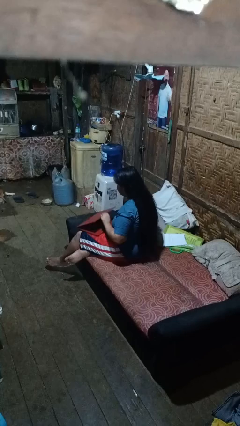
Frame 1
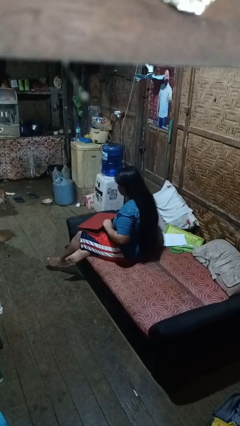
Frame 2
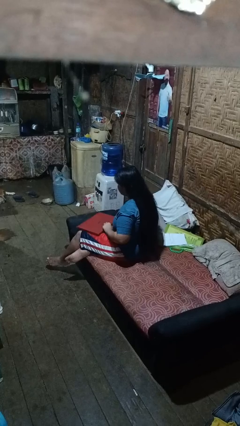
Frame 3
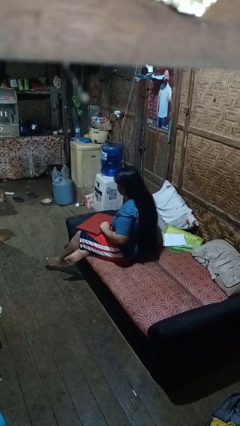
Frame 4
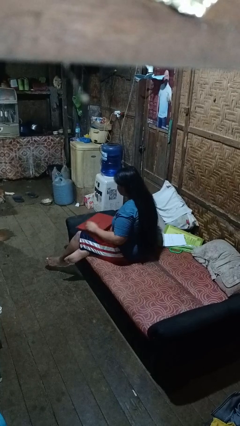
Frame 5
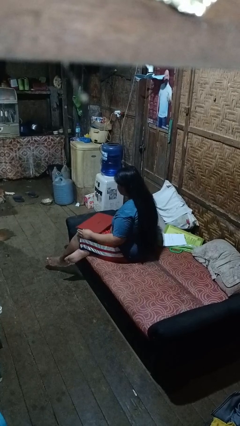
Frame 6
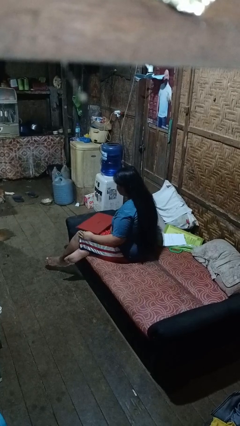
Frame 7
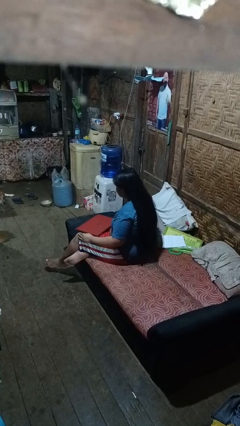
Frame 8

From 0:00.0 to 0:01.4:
person closes laptop

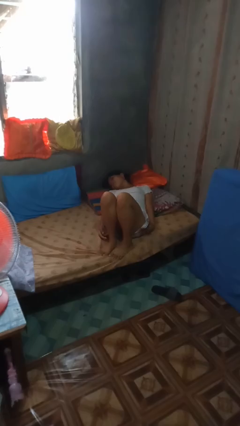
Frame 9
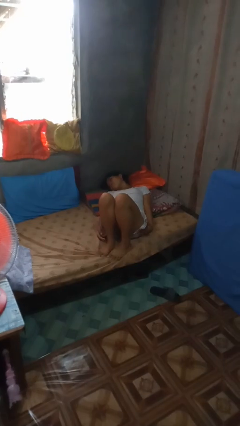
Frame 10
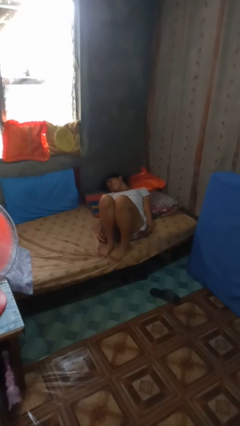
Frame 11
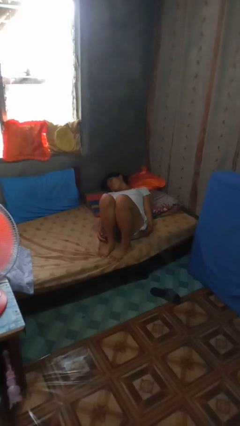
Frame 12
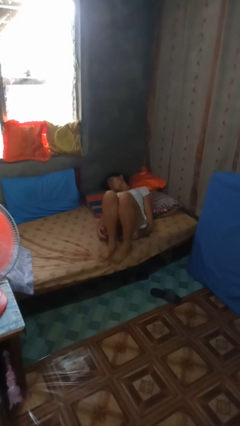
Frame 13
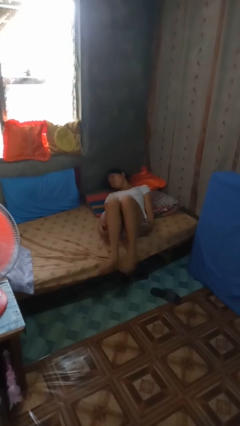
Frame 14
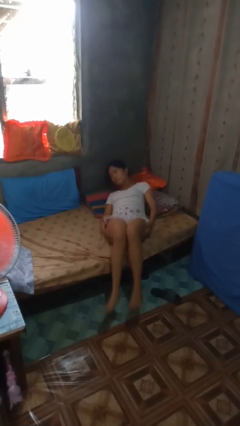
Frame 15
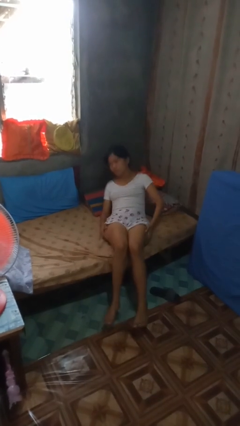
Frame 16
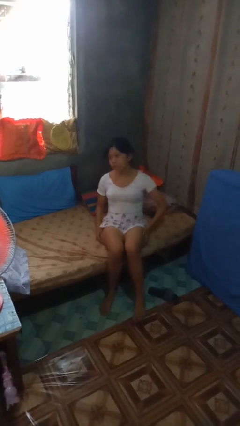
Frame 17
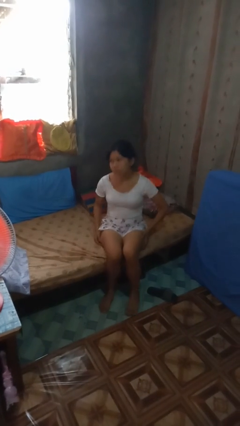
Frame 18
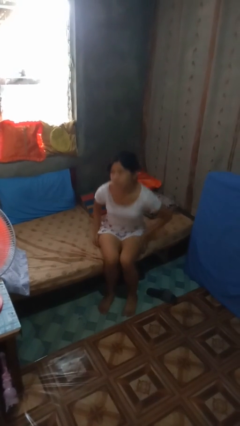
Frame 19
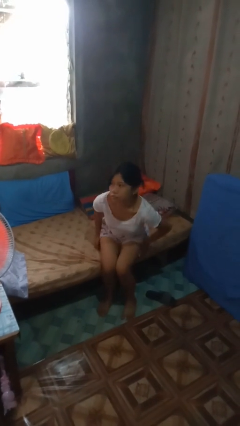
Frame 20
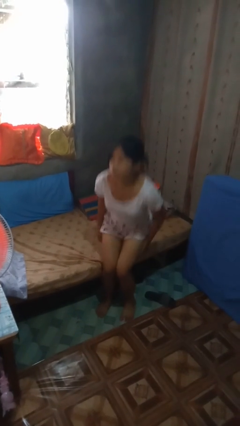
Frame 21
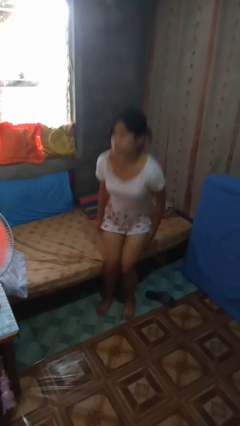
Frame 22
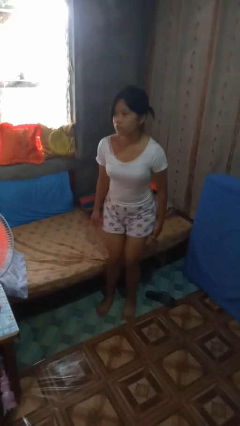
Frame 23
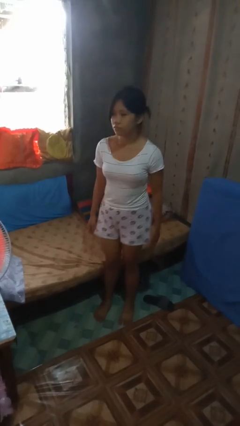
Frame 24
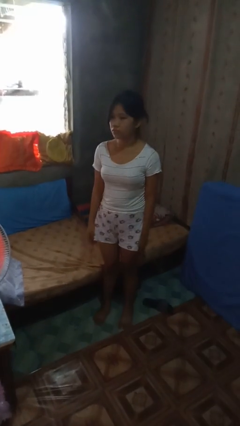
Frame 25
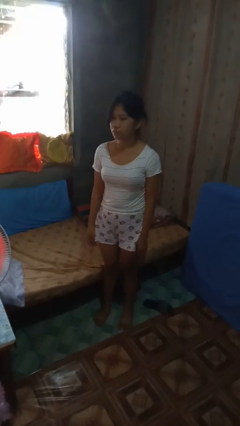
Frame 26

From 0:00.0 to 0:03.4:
person stands up

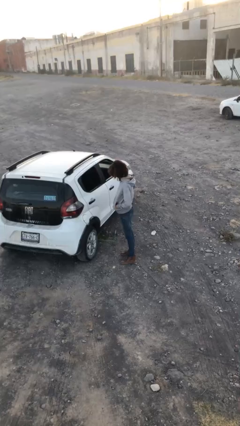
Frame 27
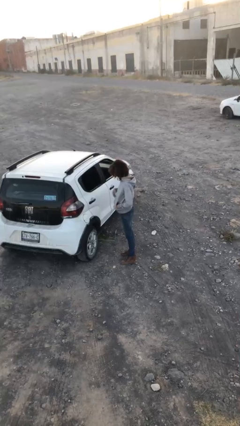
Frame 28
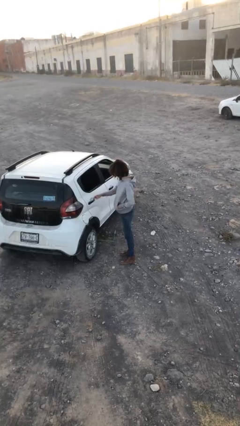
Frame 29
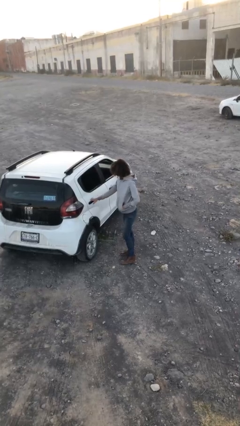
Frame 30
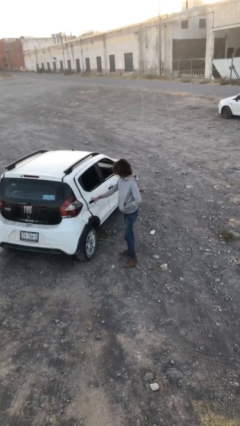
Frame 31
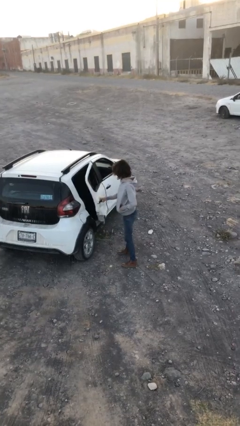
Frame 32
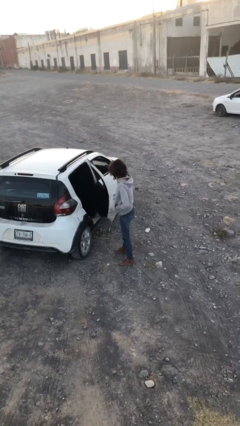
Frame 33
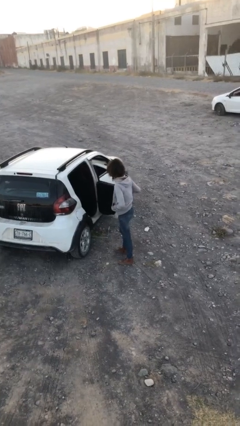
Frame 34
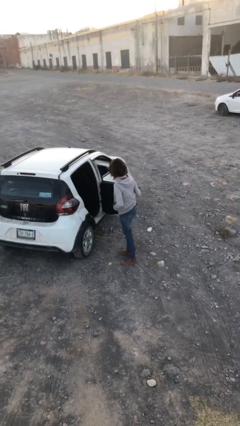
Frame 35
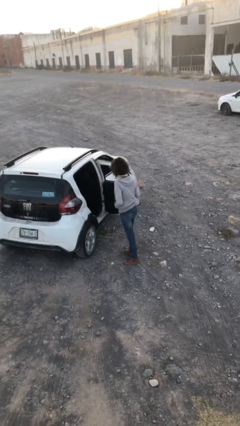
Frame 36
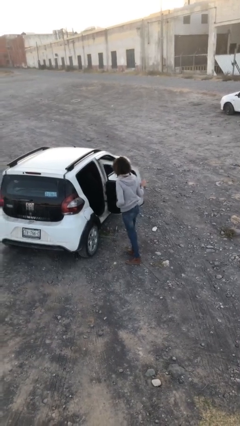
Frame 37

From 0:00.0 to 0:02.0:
person opens car door

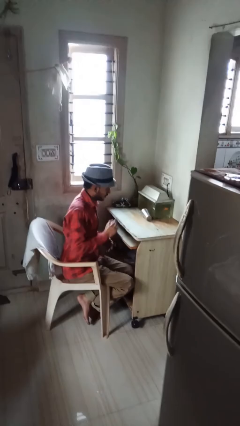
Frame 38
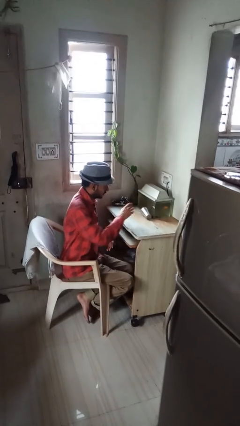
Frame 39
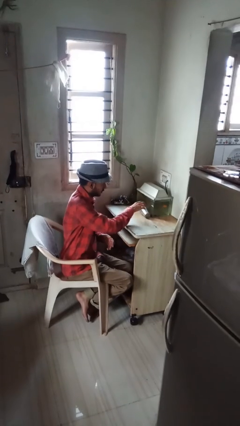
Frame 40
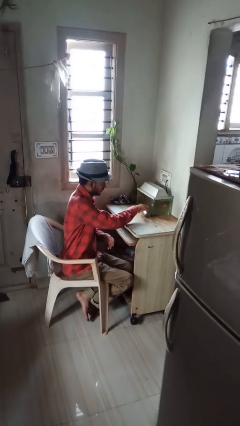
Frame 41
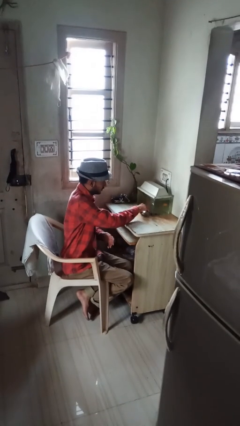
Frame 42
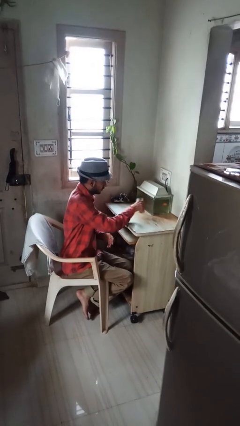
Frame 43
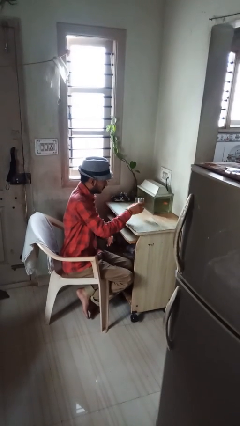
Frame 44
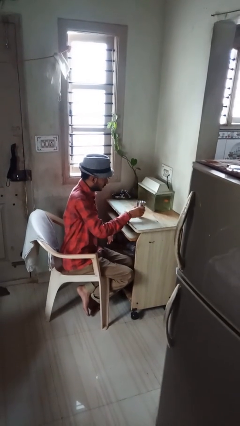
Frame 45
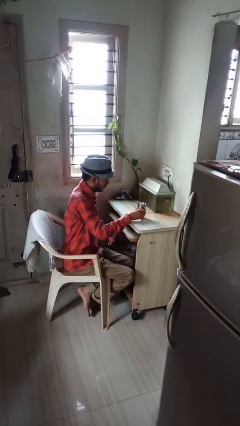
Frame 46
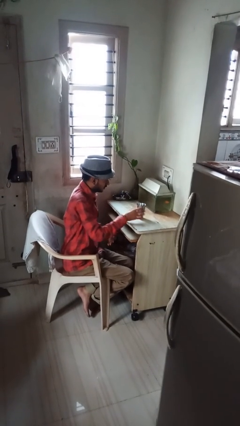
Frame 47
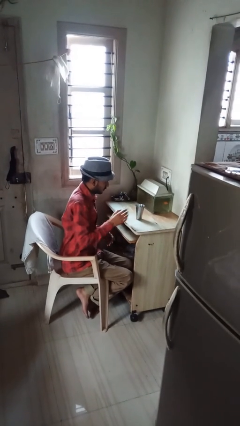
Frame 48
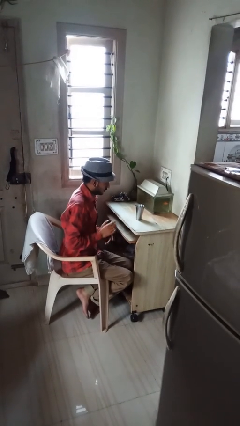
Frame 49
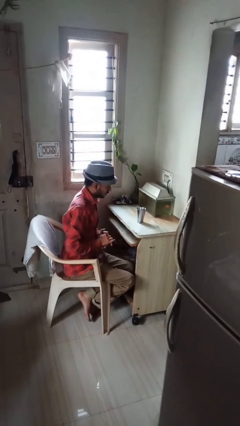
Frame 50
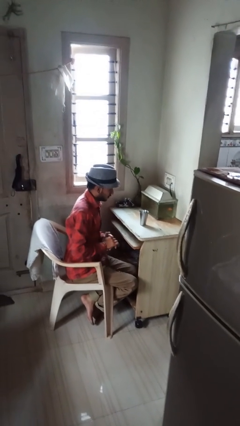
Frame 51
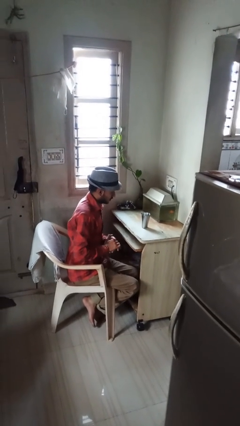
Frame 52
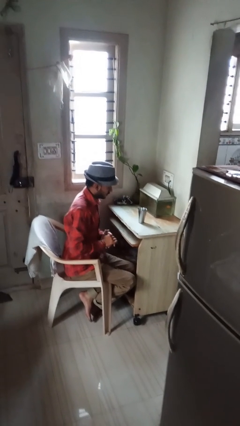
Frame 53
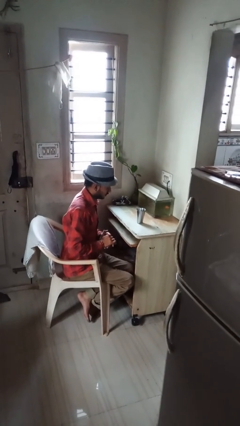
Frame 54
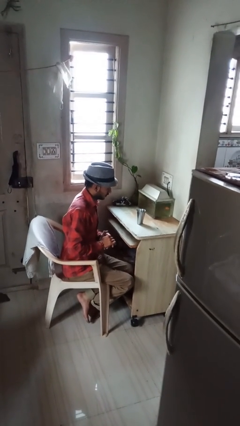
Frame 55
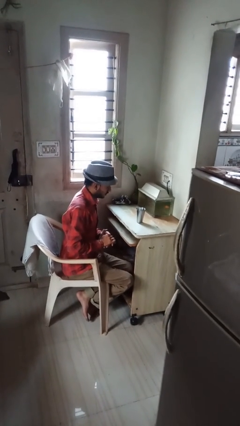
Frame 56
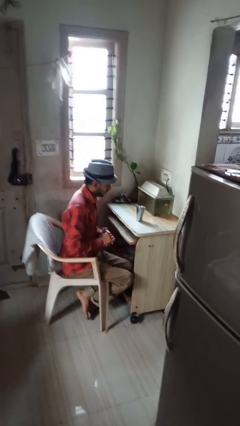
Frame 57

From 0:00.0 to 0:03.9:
person sets upright glass

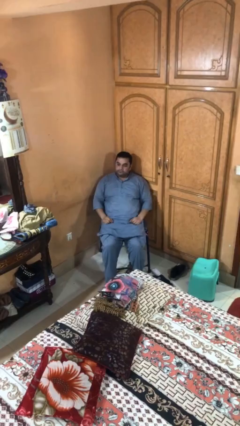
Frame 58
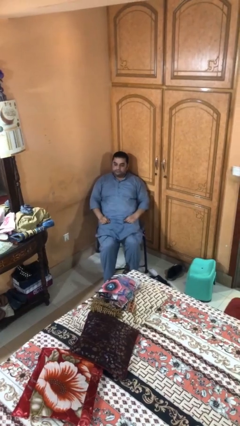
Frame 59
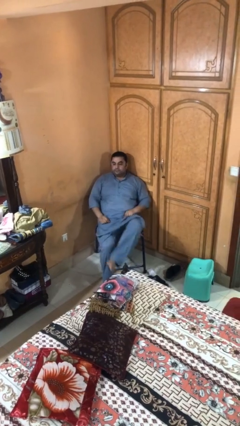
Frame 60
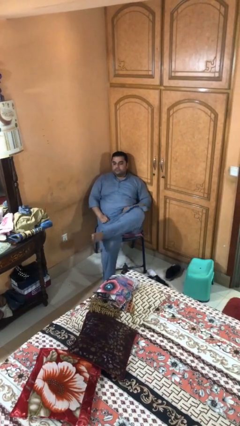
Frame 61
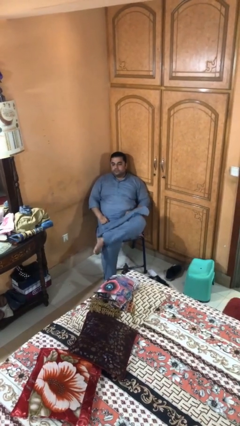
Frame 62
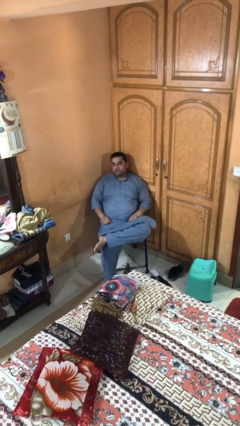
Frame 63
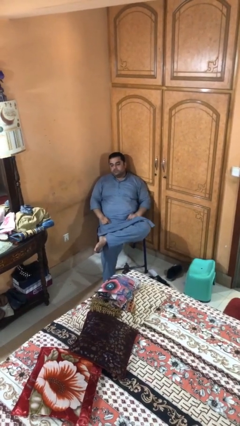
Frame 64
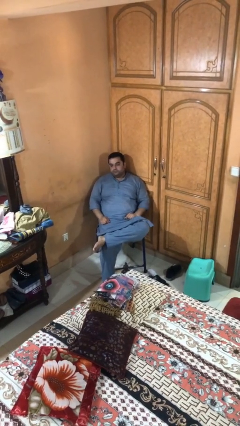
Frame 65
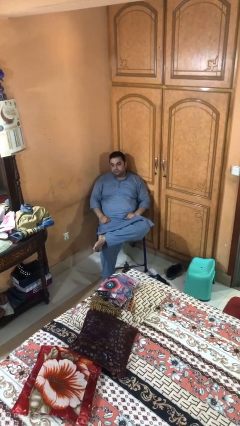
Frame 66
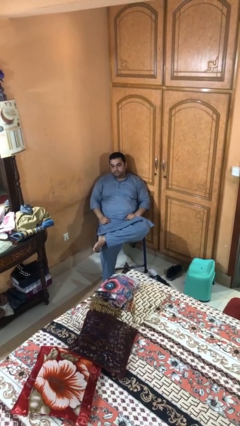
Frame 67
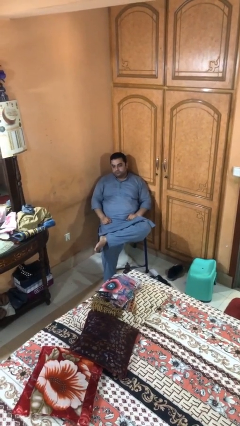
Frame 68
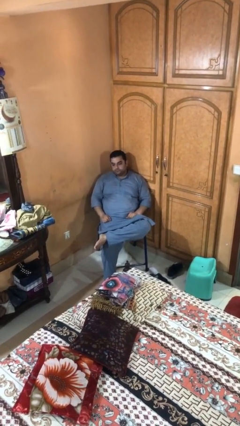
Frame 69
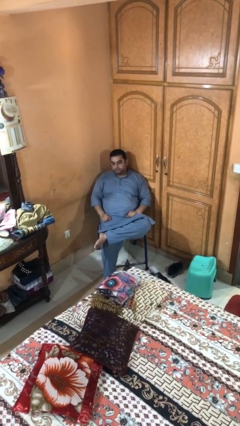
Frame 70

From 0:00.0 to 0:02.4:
person crosses legs

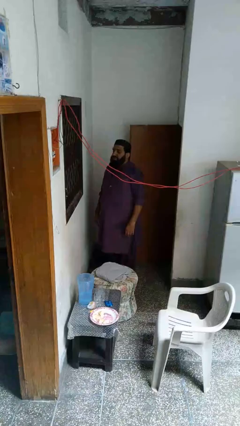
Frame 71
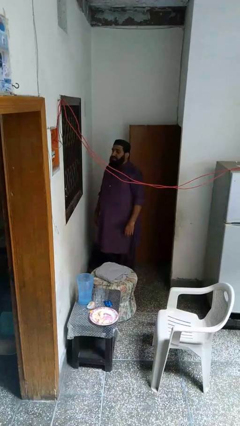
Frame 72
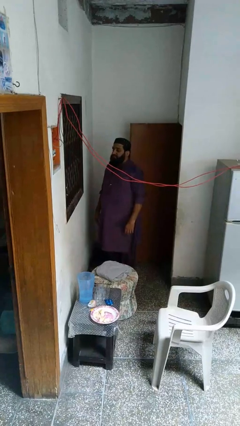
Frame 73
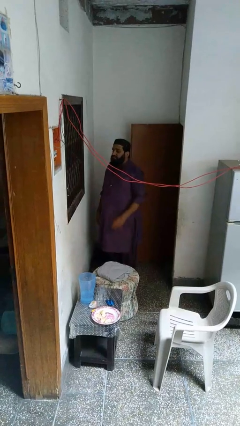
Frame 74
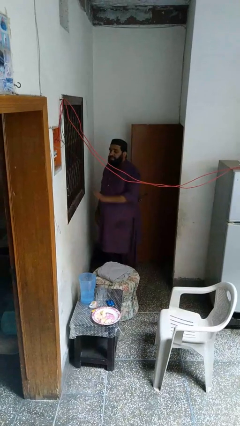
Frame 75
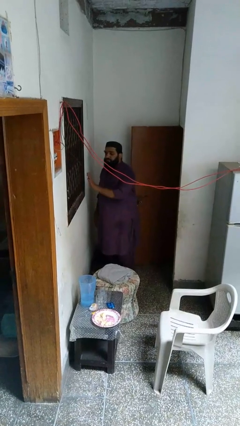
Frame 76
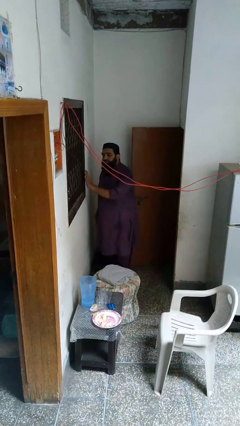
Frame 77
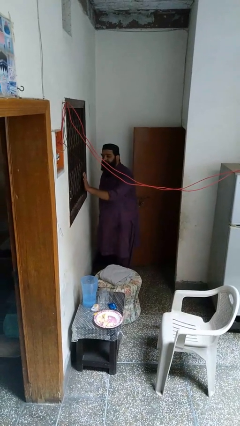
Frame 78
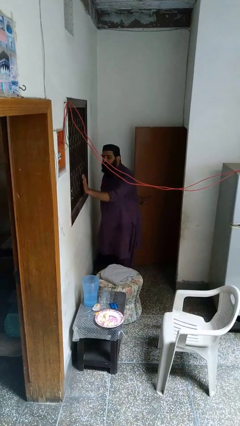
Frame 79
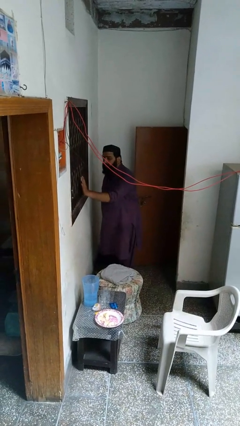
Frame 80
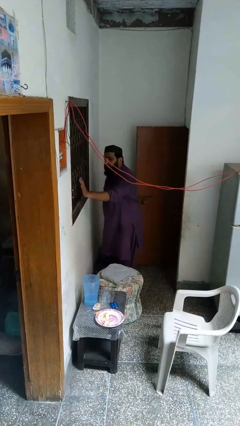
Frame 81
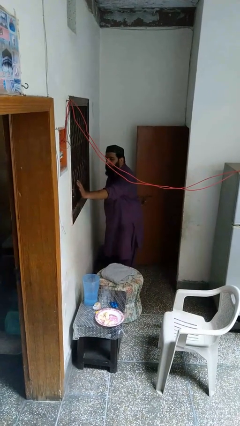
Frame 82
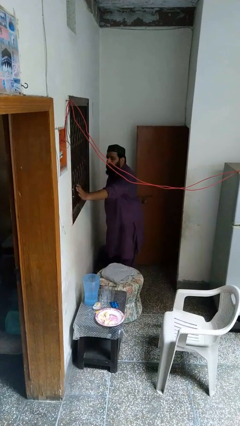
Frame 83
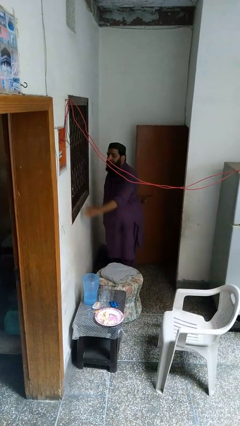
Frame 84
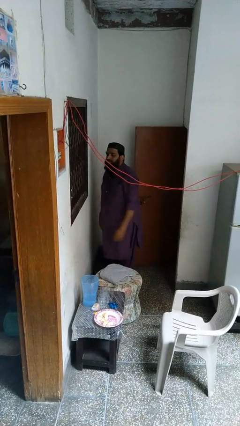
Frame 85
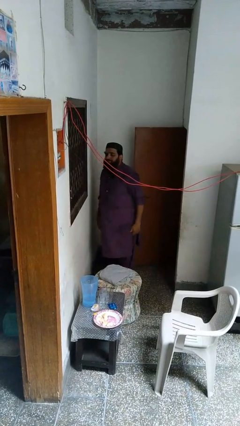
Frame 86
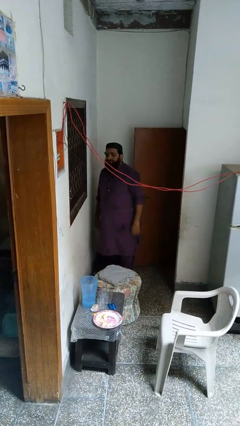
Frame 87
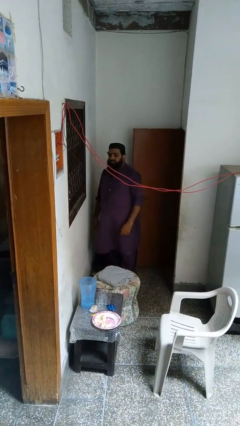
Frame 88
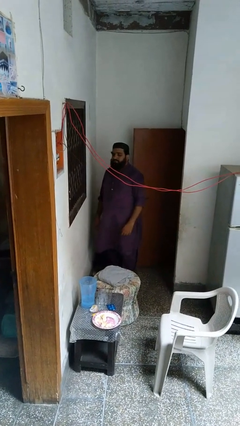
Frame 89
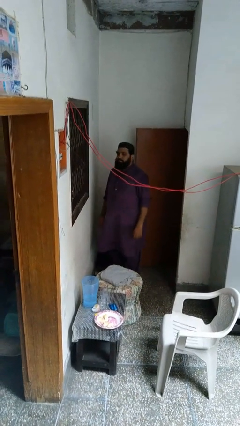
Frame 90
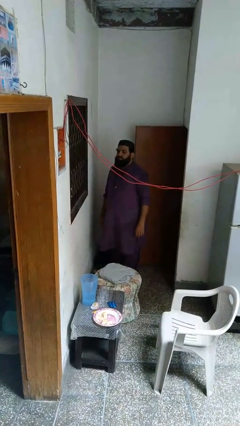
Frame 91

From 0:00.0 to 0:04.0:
person opens home window

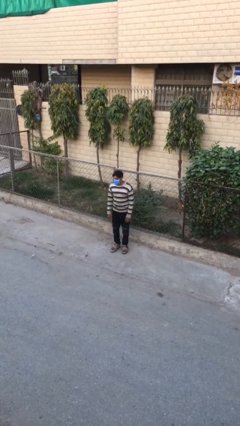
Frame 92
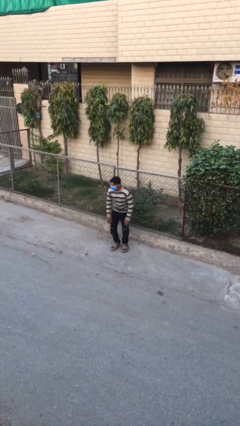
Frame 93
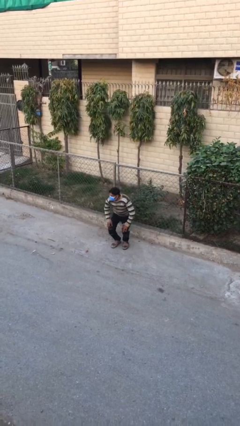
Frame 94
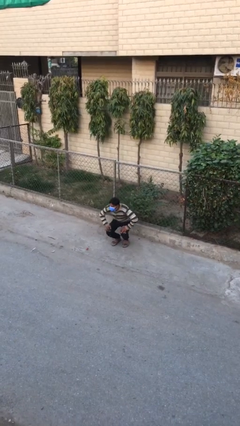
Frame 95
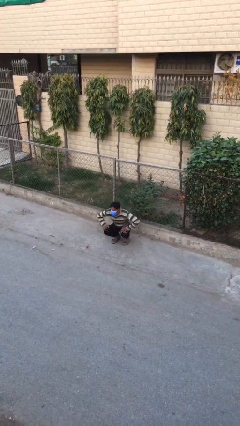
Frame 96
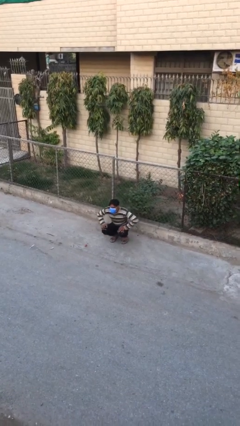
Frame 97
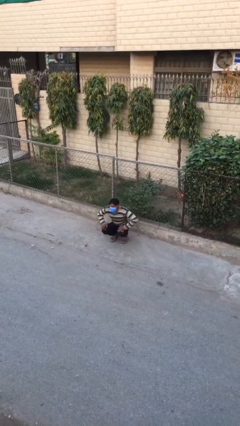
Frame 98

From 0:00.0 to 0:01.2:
person sits down
